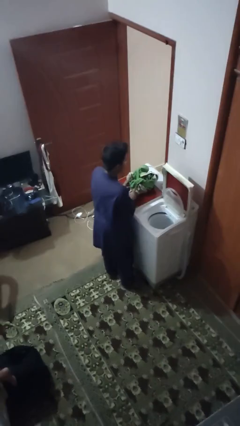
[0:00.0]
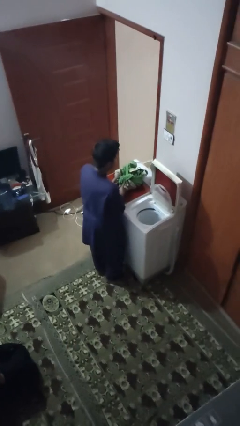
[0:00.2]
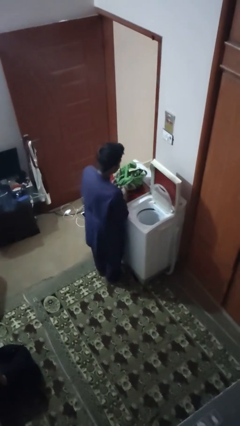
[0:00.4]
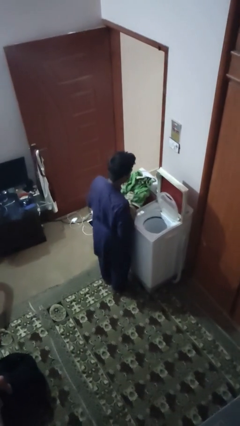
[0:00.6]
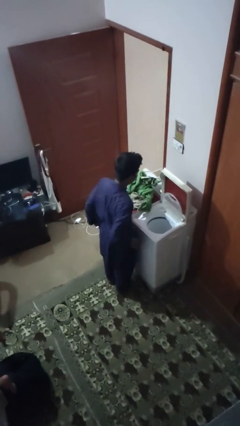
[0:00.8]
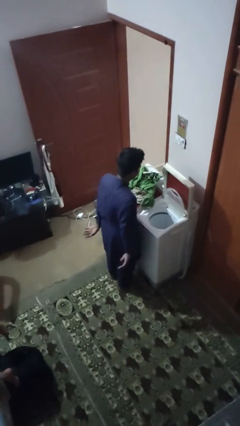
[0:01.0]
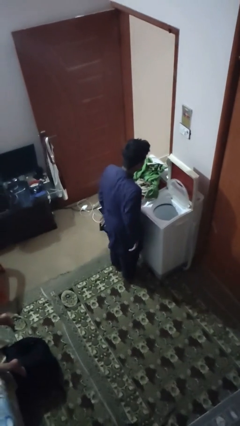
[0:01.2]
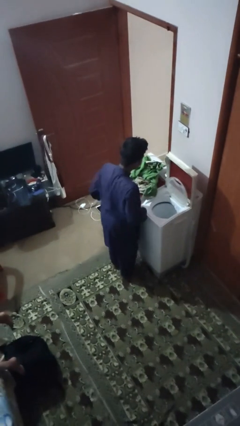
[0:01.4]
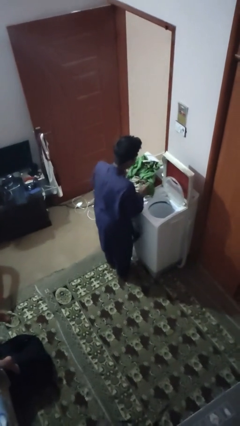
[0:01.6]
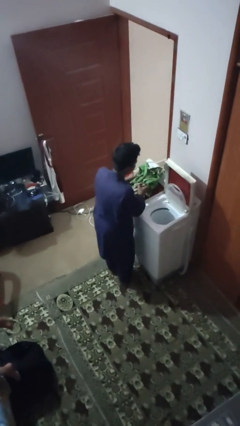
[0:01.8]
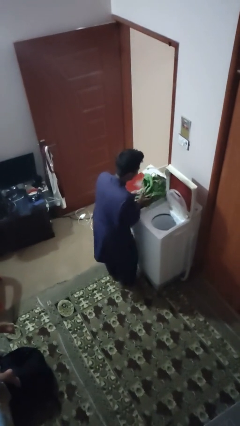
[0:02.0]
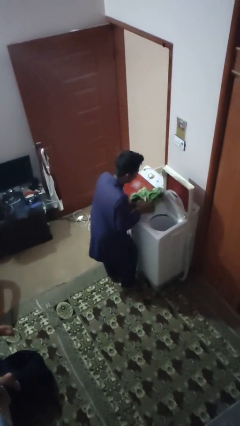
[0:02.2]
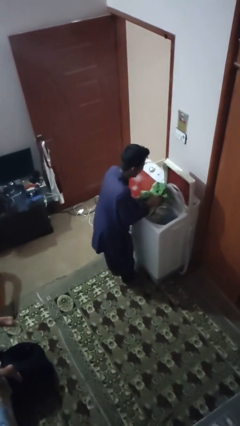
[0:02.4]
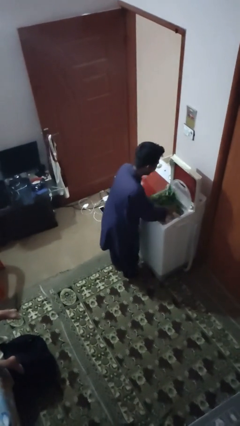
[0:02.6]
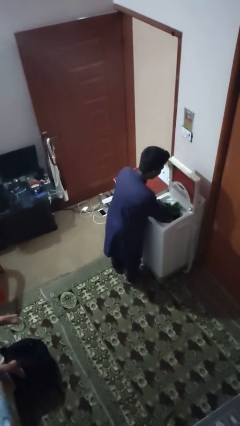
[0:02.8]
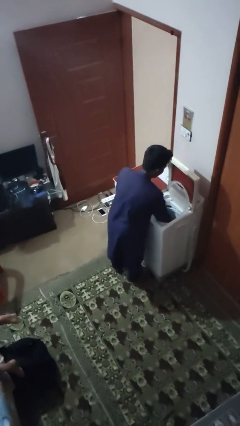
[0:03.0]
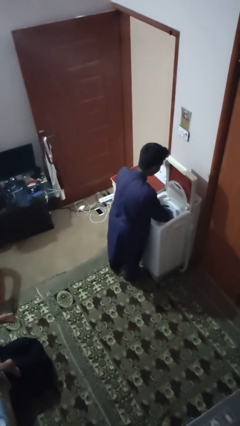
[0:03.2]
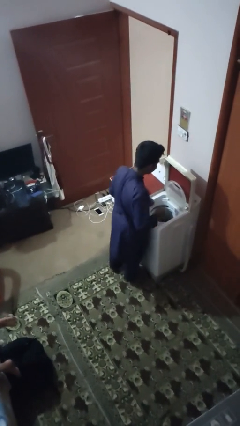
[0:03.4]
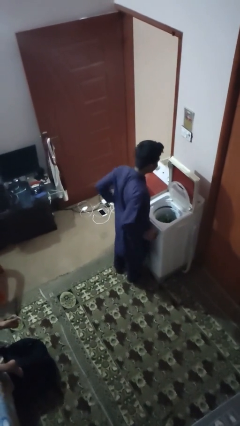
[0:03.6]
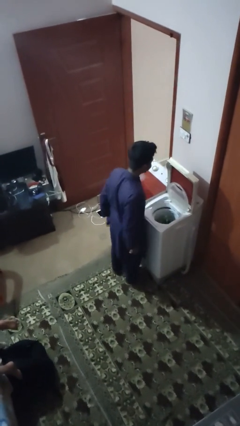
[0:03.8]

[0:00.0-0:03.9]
person loads dryer

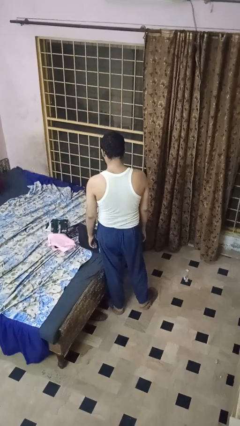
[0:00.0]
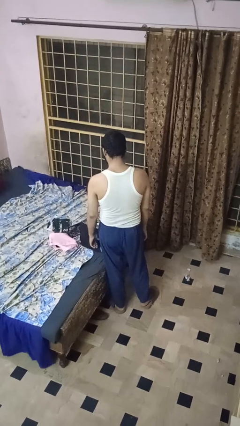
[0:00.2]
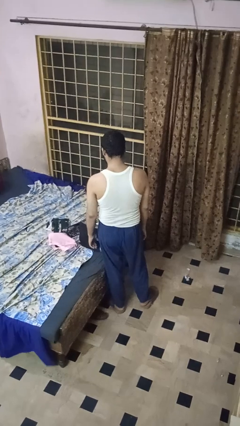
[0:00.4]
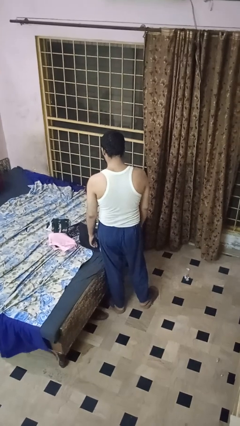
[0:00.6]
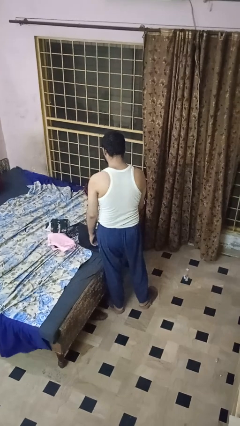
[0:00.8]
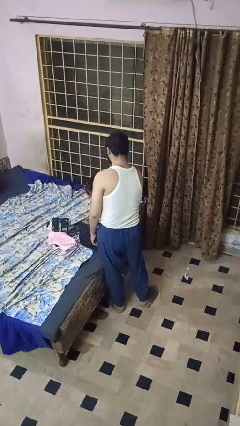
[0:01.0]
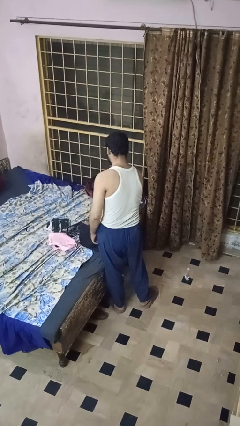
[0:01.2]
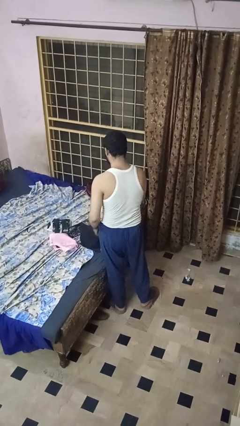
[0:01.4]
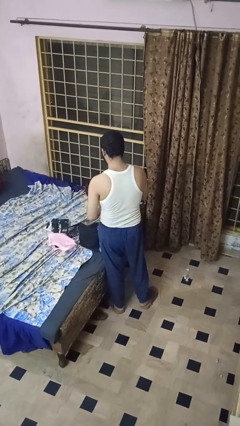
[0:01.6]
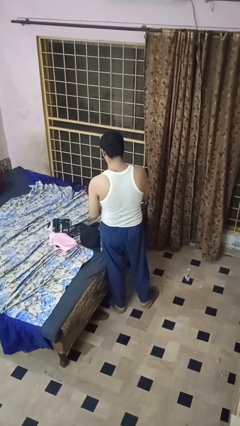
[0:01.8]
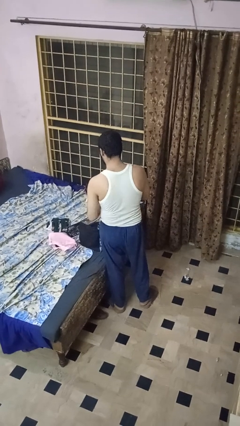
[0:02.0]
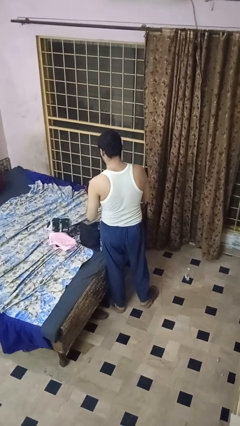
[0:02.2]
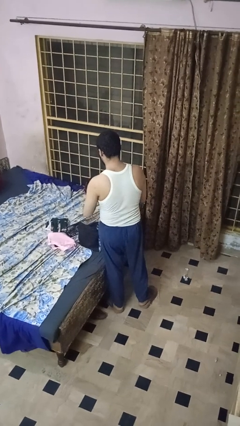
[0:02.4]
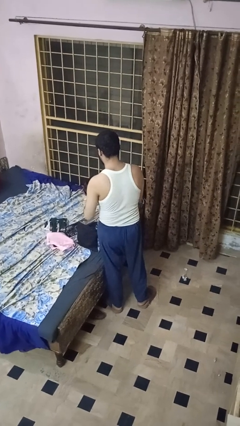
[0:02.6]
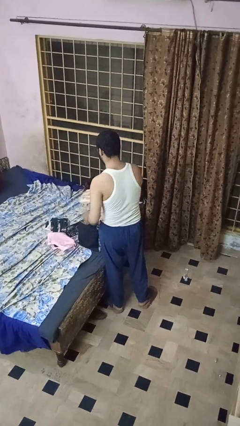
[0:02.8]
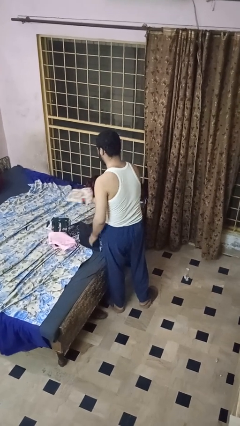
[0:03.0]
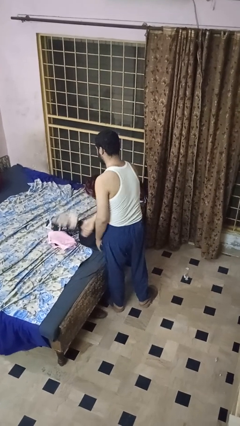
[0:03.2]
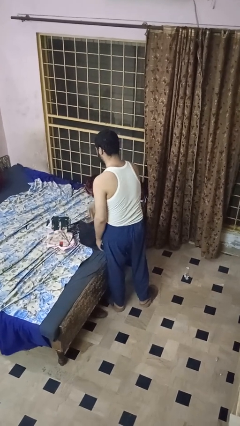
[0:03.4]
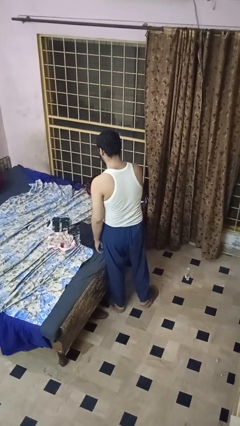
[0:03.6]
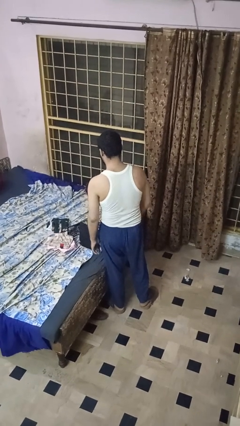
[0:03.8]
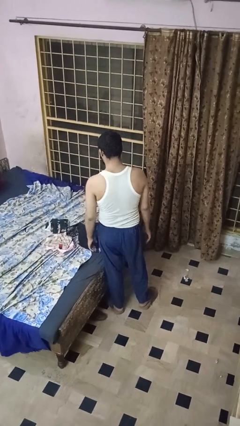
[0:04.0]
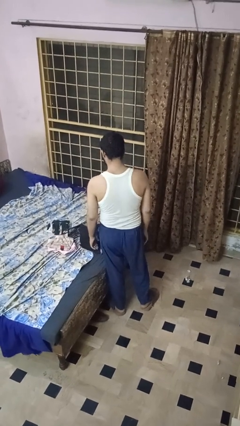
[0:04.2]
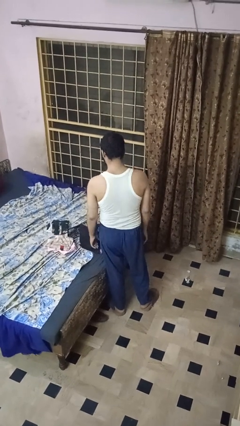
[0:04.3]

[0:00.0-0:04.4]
person unloads clothes from suitcase

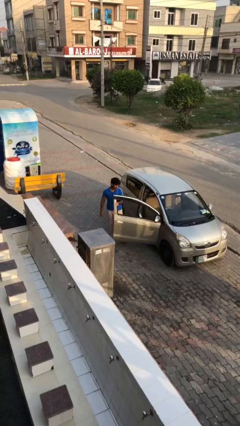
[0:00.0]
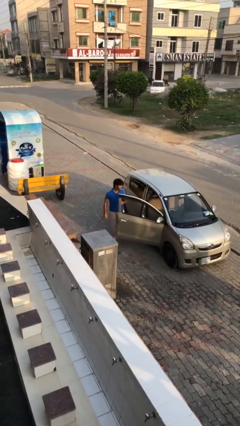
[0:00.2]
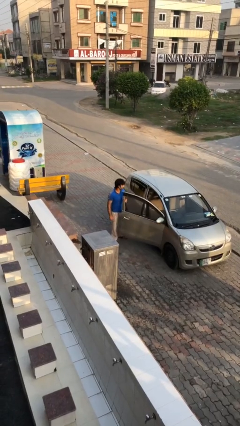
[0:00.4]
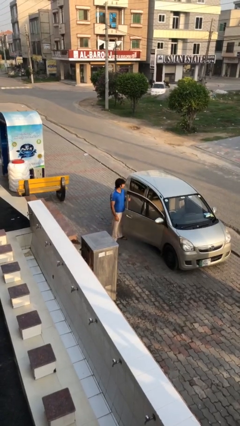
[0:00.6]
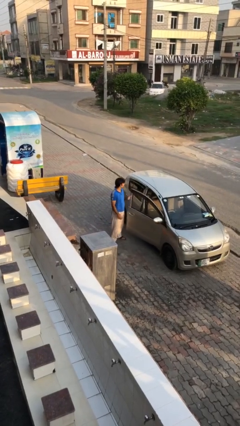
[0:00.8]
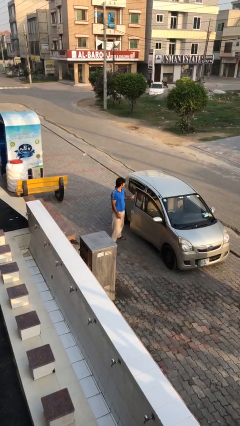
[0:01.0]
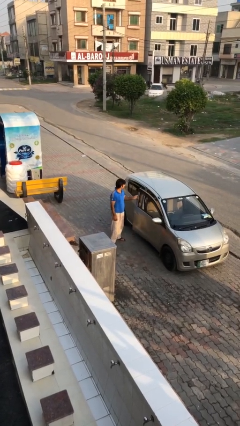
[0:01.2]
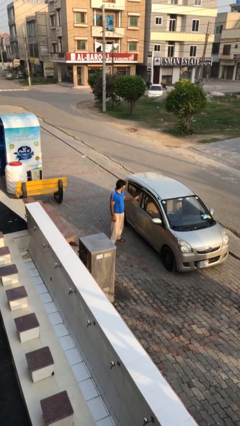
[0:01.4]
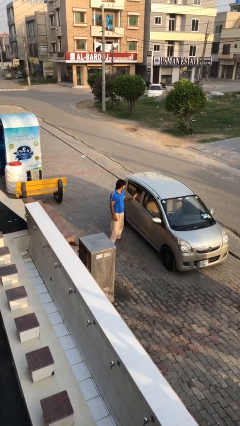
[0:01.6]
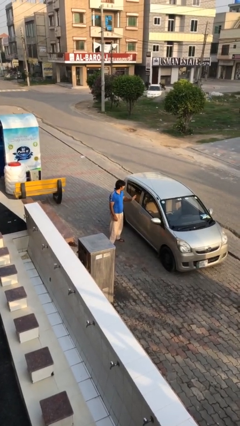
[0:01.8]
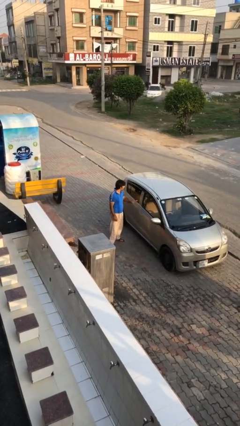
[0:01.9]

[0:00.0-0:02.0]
person closes car door

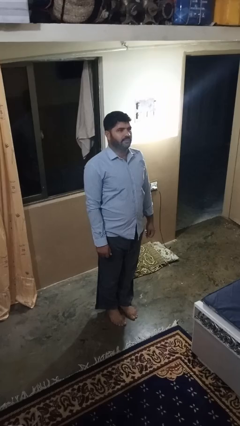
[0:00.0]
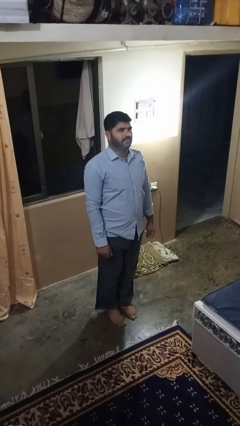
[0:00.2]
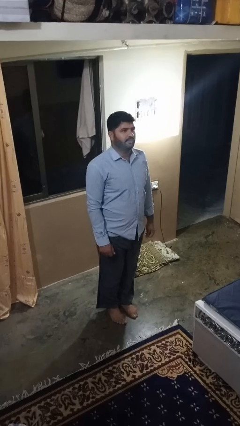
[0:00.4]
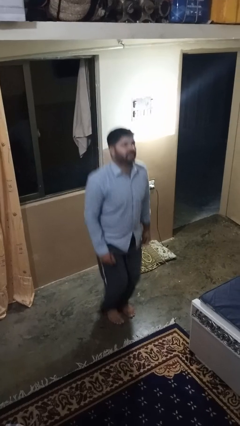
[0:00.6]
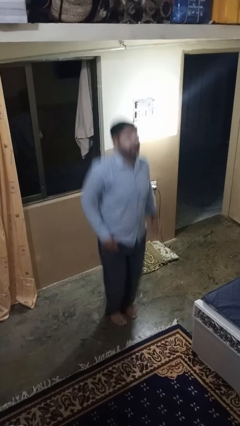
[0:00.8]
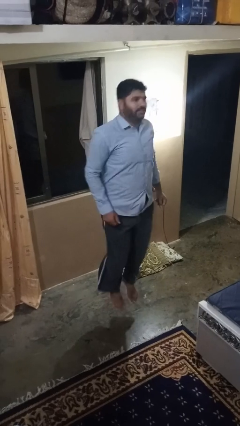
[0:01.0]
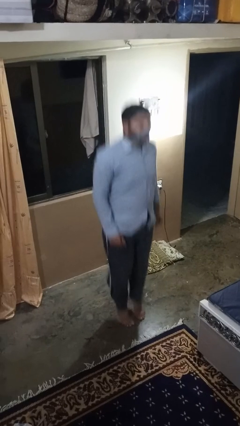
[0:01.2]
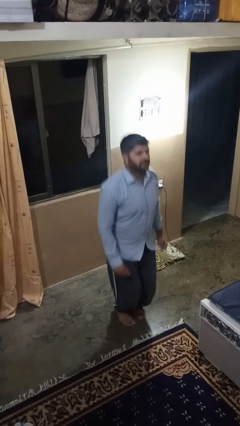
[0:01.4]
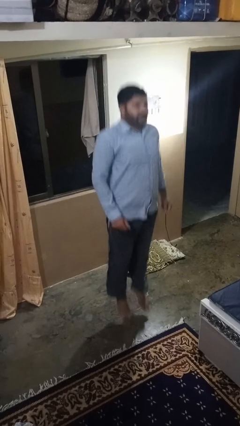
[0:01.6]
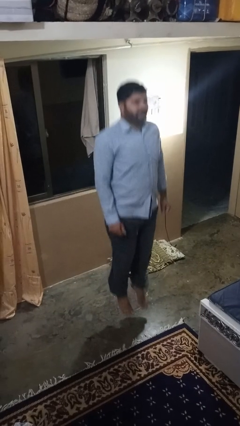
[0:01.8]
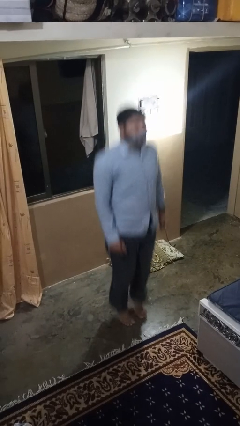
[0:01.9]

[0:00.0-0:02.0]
person jumps

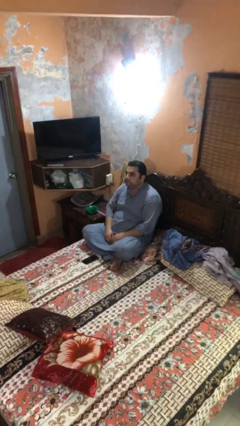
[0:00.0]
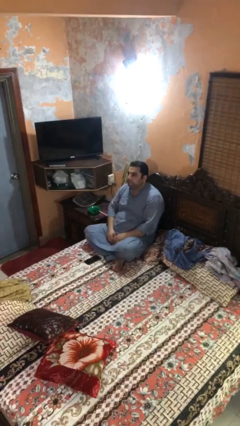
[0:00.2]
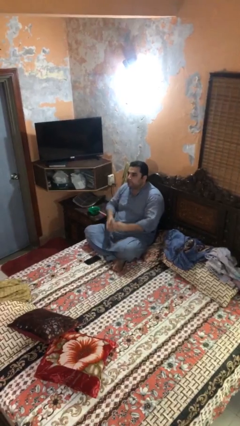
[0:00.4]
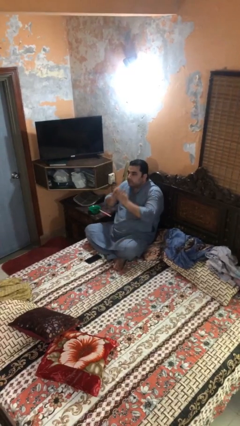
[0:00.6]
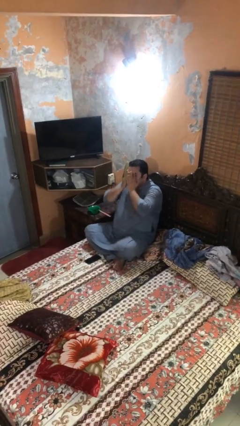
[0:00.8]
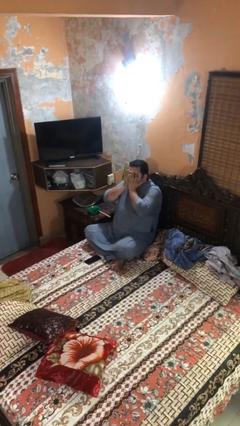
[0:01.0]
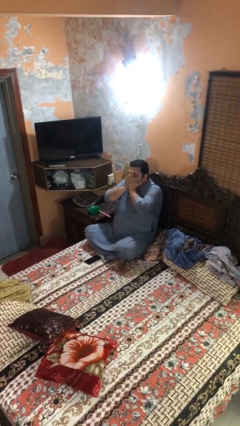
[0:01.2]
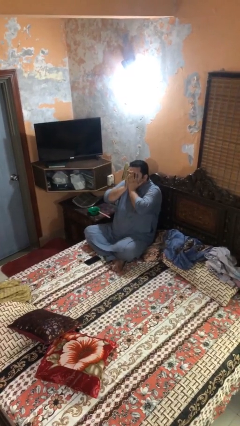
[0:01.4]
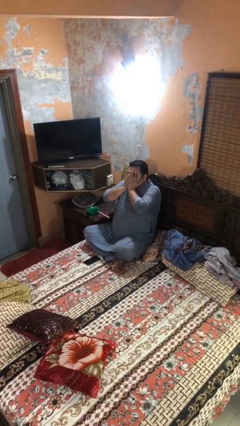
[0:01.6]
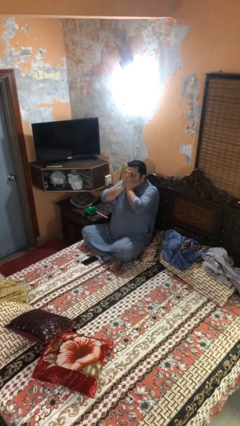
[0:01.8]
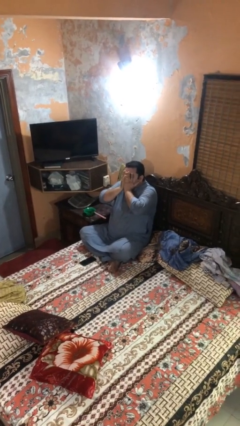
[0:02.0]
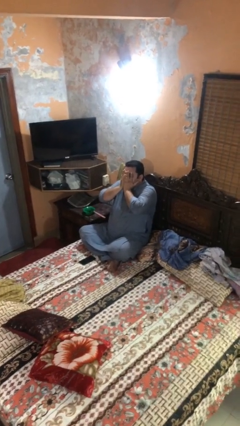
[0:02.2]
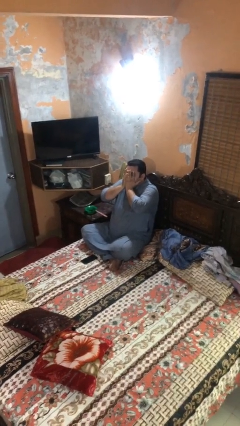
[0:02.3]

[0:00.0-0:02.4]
person covers face with hands

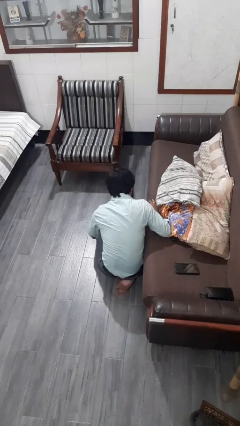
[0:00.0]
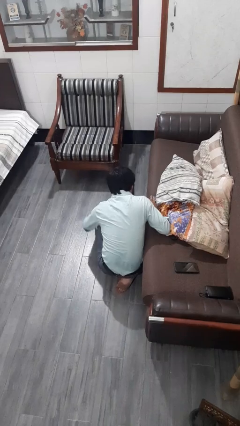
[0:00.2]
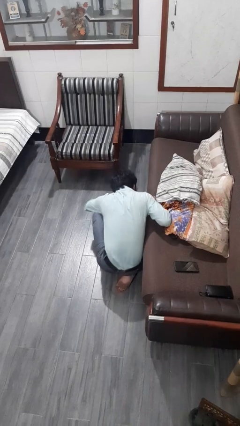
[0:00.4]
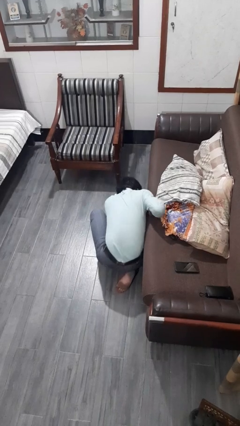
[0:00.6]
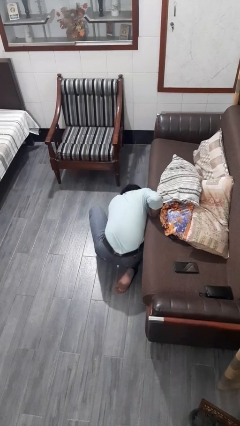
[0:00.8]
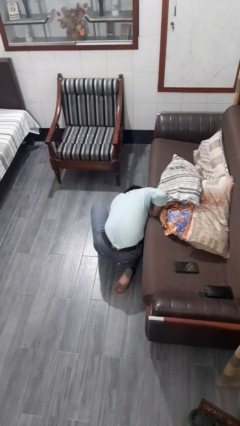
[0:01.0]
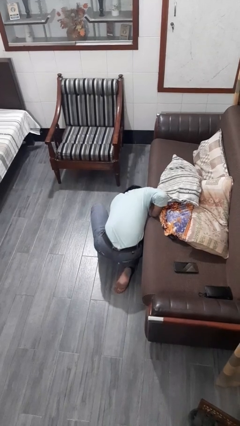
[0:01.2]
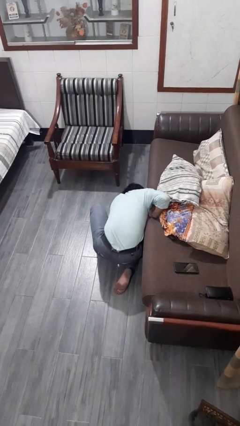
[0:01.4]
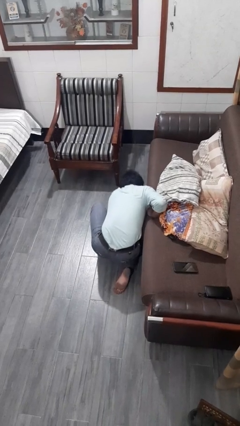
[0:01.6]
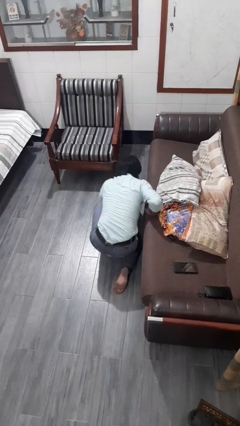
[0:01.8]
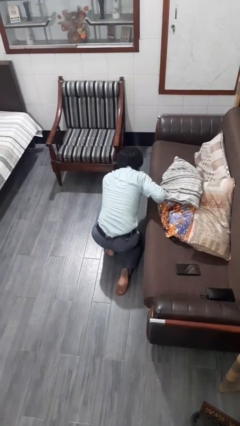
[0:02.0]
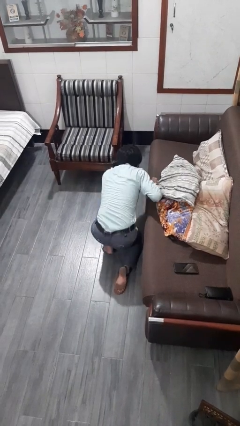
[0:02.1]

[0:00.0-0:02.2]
person searches under couch

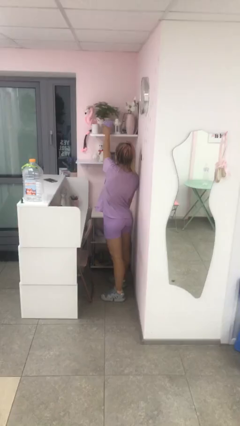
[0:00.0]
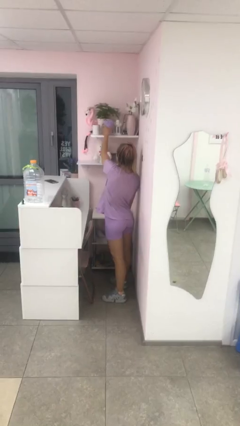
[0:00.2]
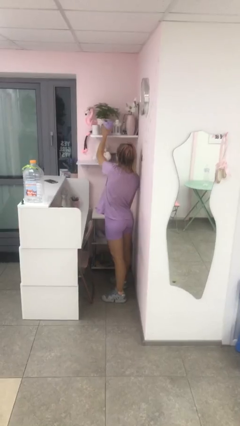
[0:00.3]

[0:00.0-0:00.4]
person picks up object from cabinet
